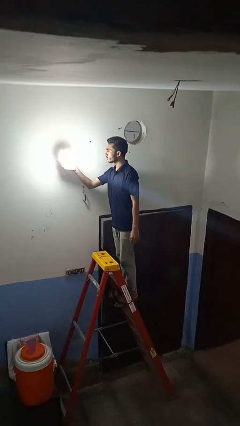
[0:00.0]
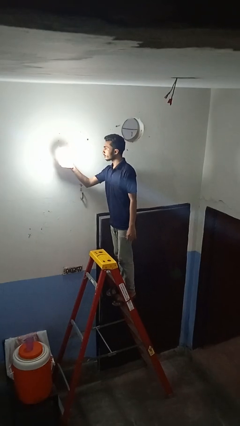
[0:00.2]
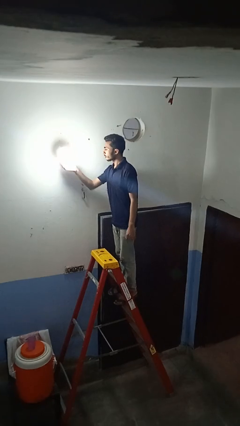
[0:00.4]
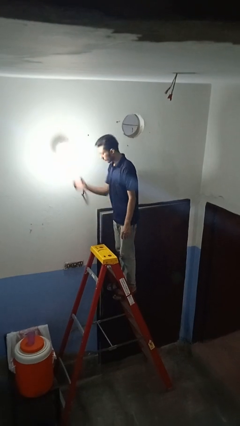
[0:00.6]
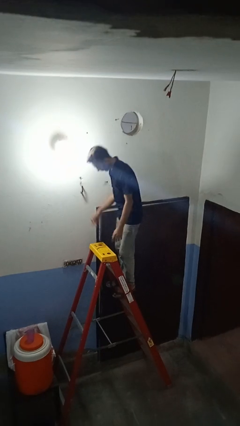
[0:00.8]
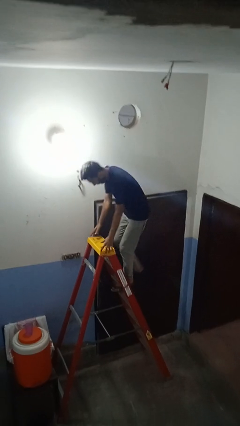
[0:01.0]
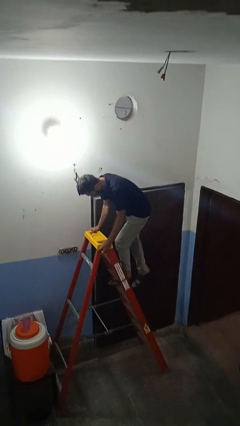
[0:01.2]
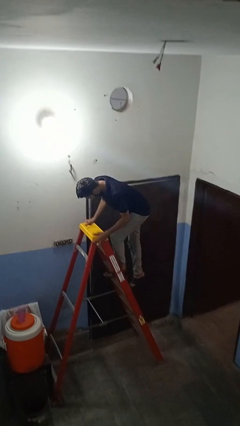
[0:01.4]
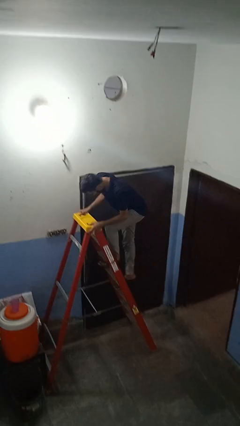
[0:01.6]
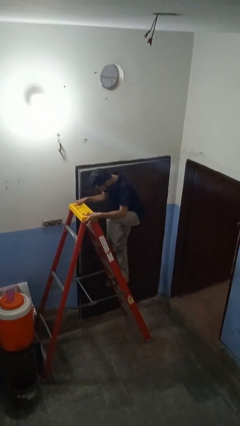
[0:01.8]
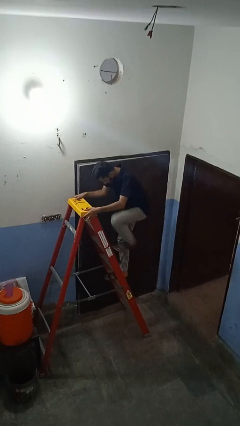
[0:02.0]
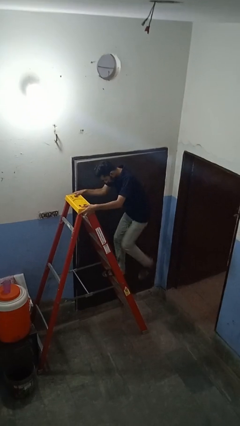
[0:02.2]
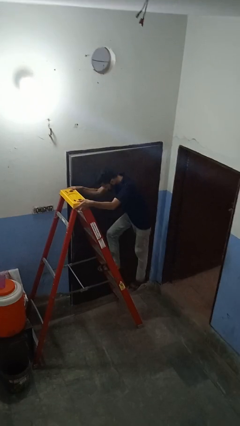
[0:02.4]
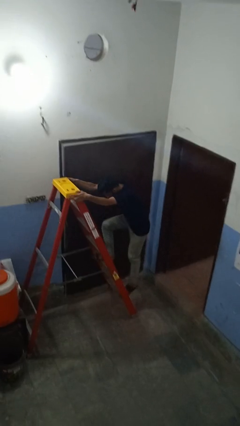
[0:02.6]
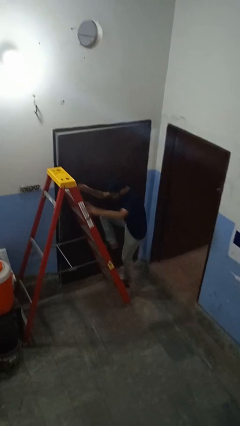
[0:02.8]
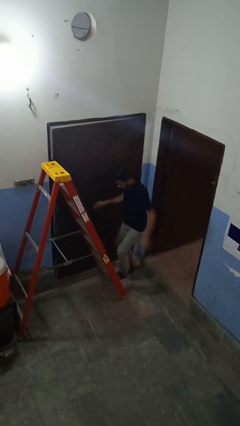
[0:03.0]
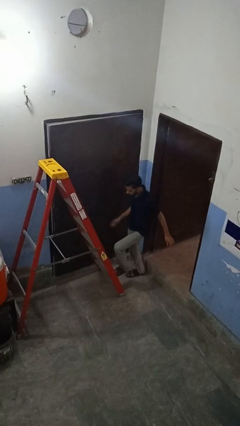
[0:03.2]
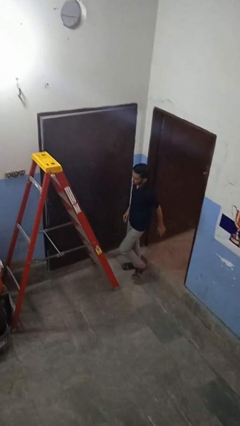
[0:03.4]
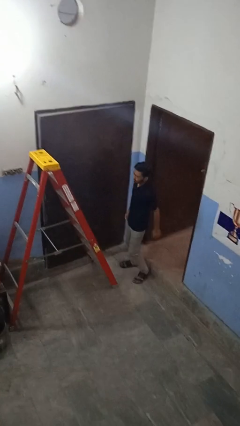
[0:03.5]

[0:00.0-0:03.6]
person climbs down ladder

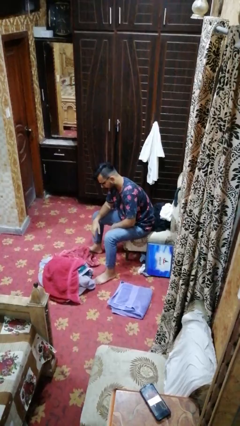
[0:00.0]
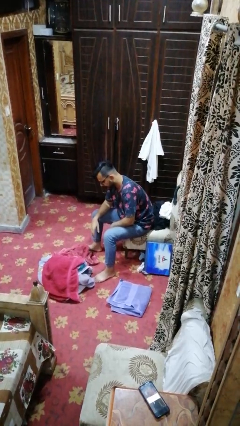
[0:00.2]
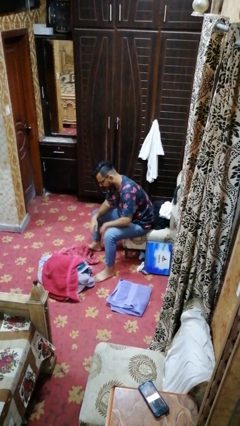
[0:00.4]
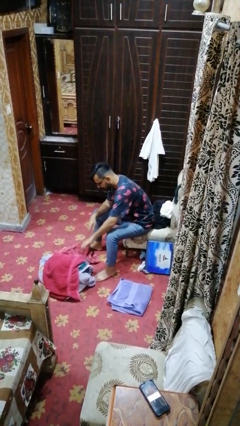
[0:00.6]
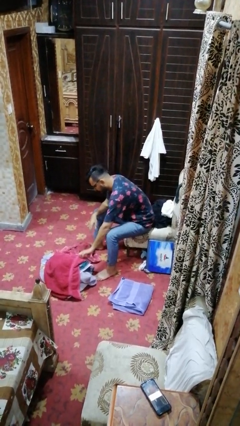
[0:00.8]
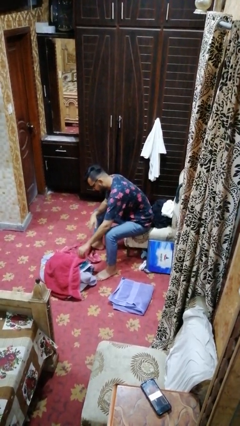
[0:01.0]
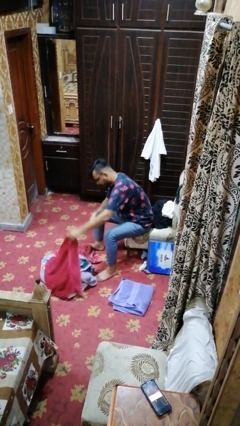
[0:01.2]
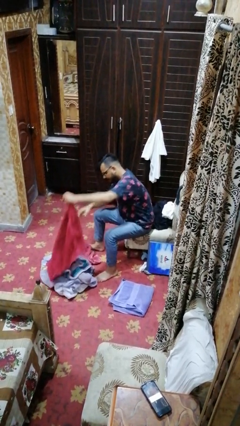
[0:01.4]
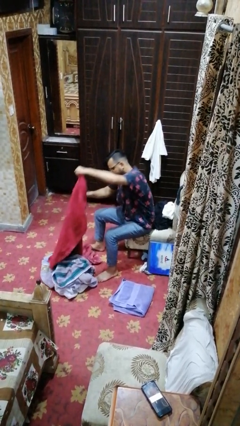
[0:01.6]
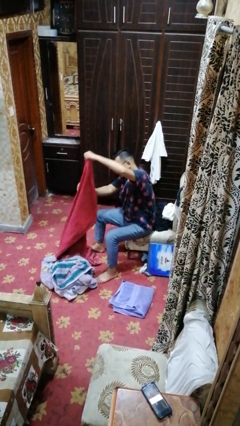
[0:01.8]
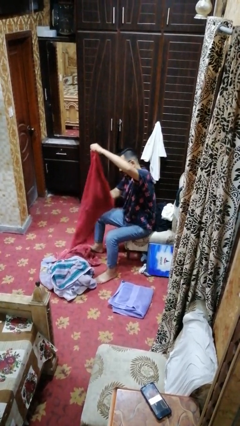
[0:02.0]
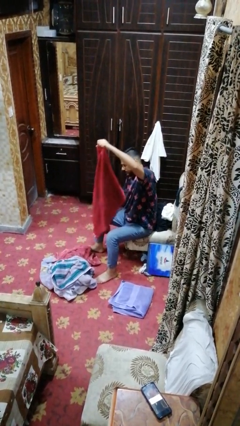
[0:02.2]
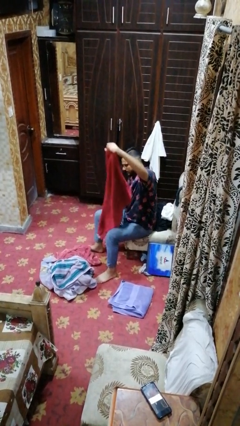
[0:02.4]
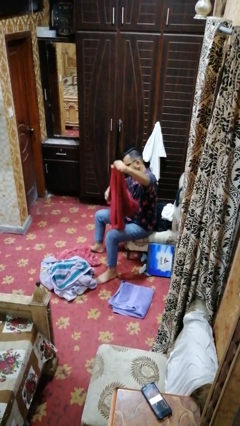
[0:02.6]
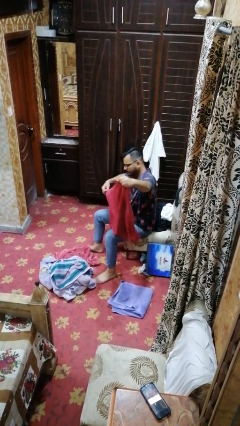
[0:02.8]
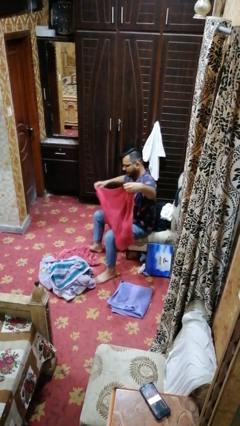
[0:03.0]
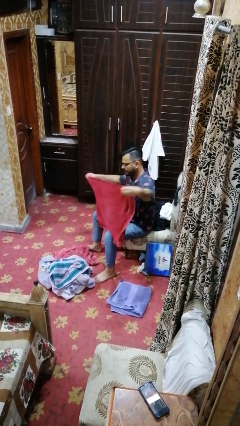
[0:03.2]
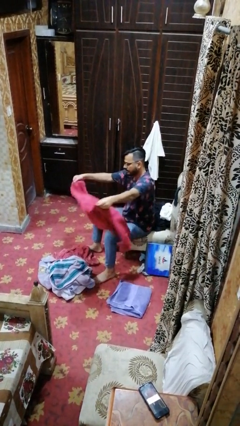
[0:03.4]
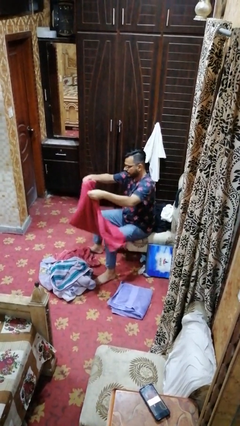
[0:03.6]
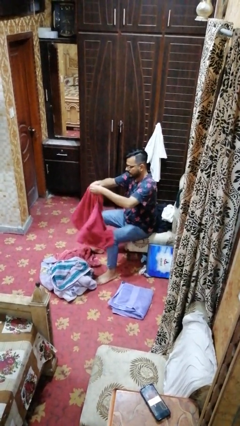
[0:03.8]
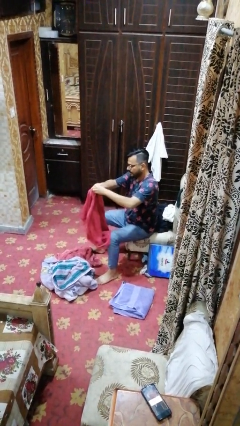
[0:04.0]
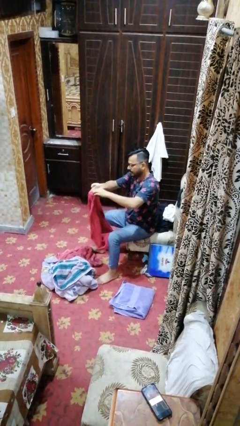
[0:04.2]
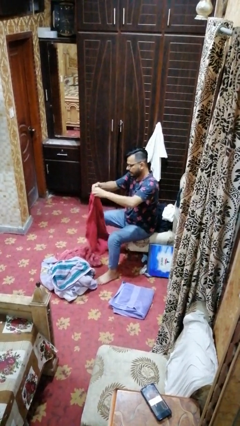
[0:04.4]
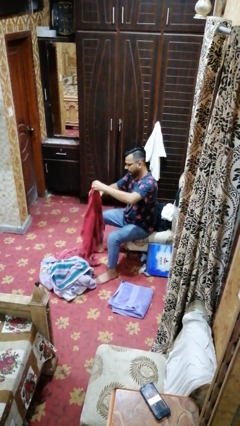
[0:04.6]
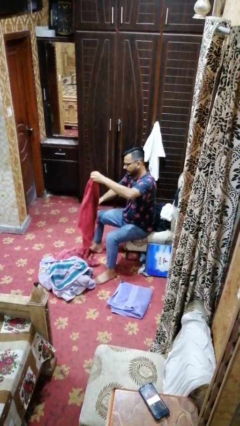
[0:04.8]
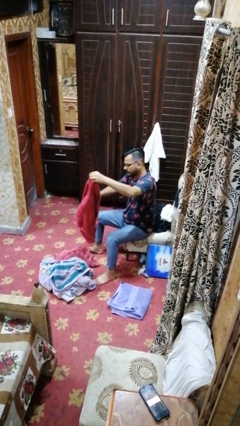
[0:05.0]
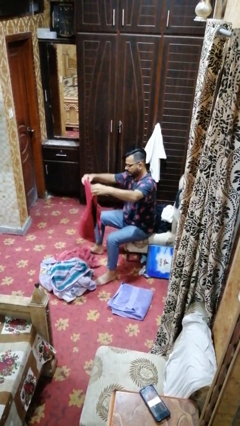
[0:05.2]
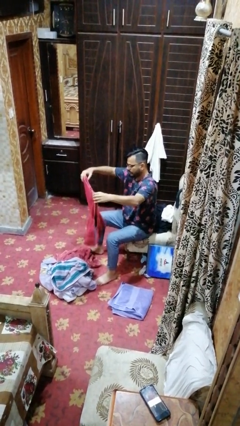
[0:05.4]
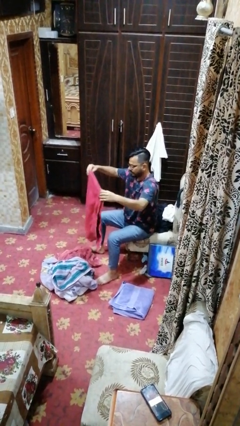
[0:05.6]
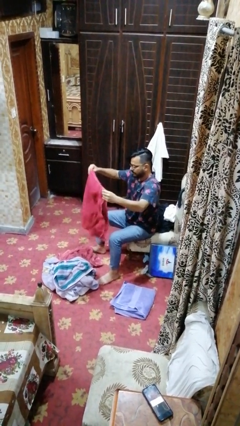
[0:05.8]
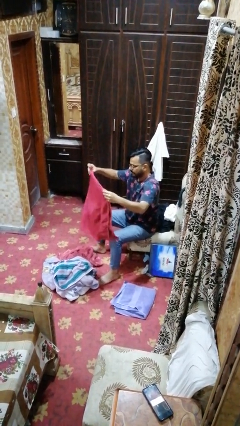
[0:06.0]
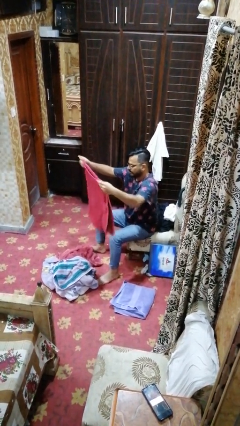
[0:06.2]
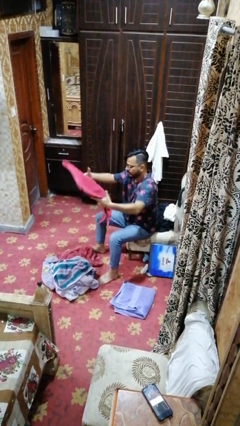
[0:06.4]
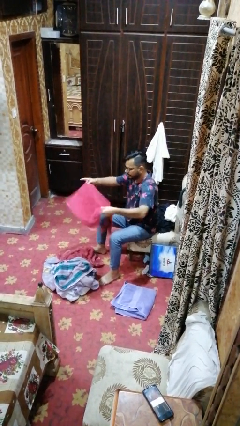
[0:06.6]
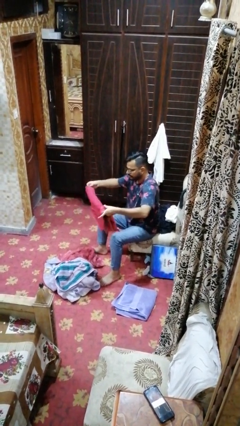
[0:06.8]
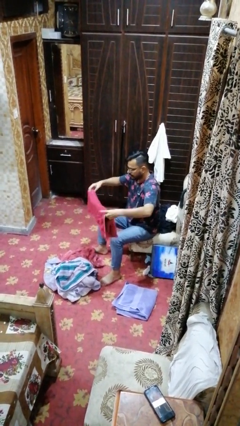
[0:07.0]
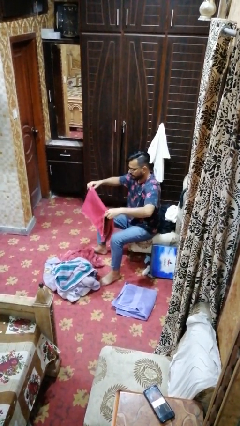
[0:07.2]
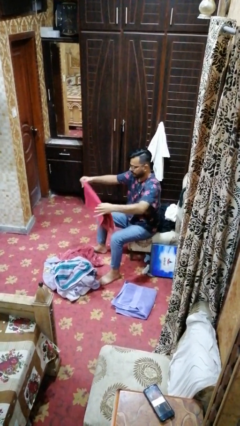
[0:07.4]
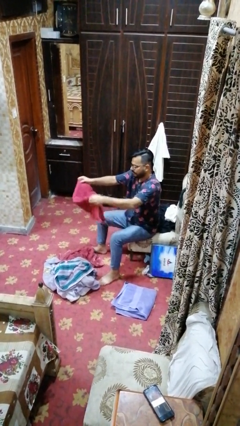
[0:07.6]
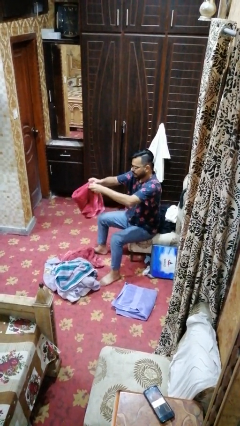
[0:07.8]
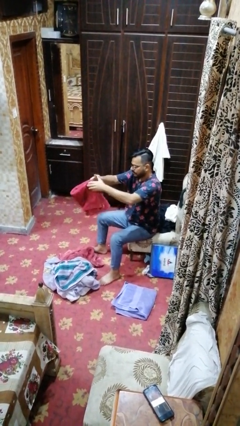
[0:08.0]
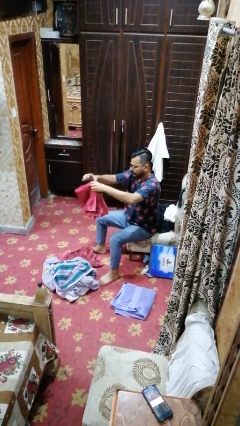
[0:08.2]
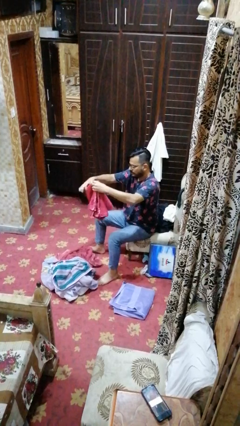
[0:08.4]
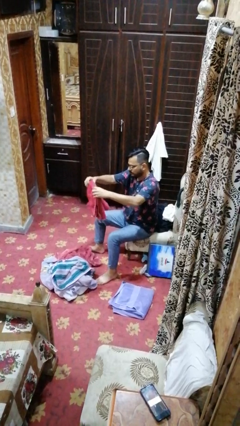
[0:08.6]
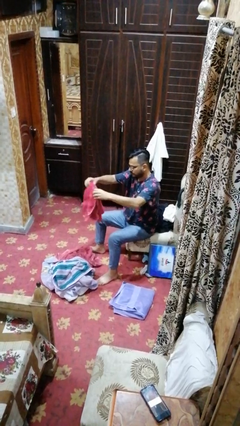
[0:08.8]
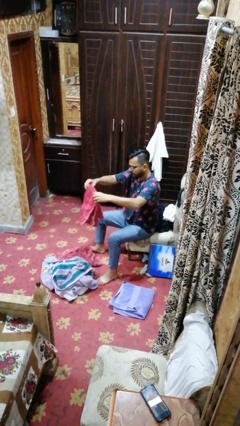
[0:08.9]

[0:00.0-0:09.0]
person folds towel

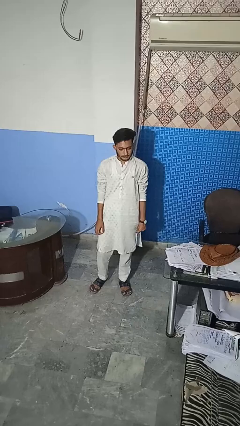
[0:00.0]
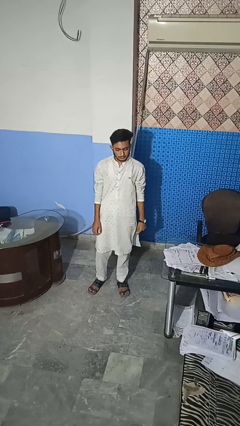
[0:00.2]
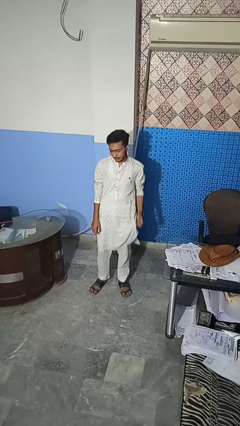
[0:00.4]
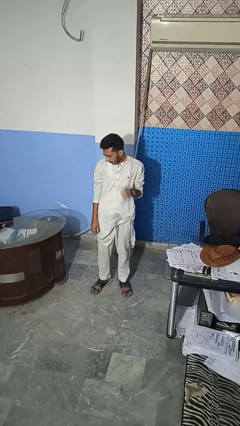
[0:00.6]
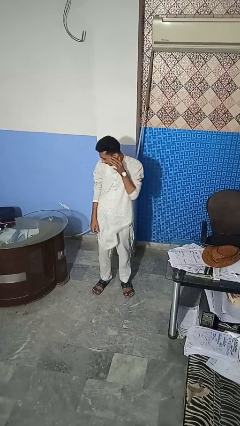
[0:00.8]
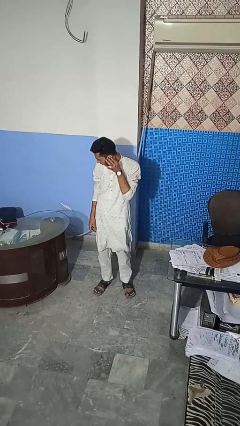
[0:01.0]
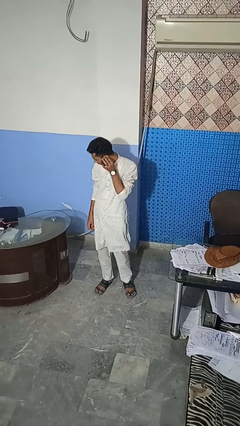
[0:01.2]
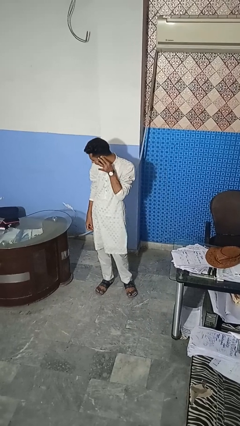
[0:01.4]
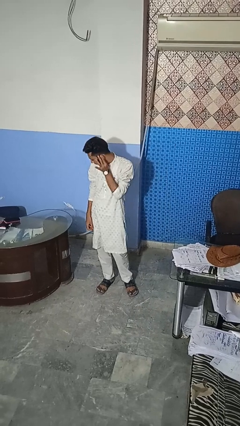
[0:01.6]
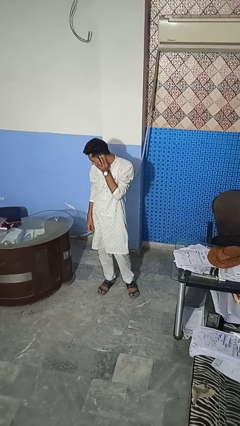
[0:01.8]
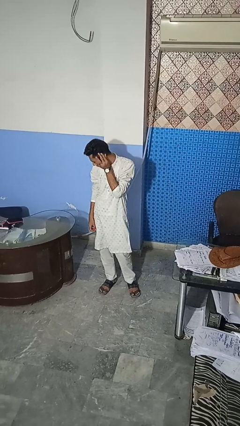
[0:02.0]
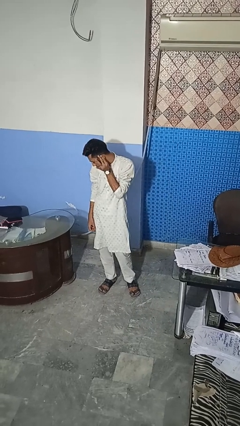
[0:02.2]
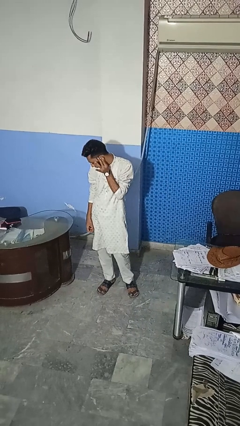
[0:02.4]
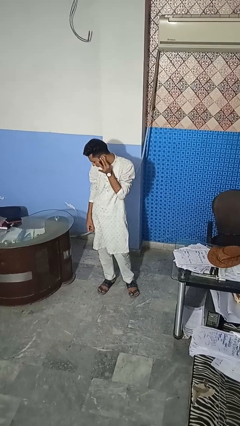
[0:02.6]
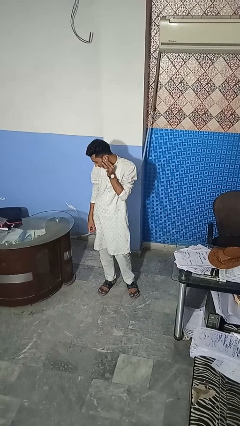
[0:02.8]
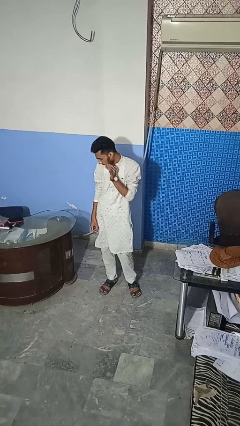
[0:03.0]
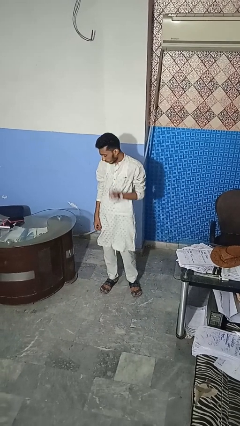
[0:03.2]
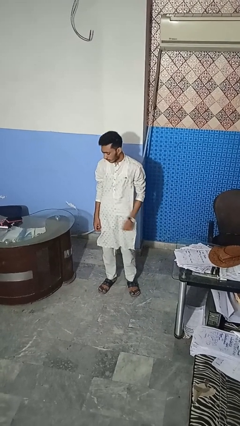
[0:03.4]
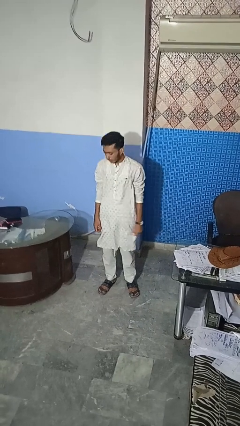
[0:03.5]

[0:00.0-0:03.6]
person touches earlobe

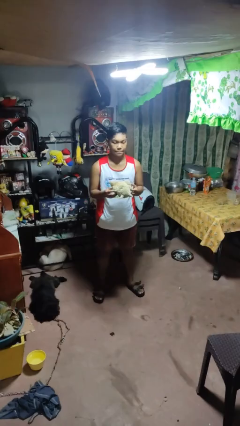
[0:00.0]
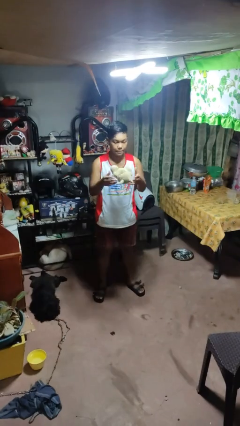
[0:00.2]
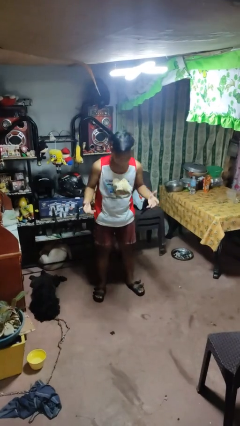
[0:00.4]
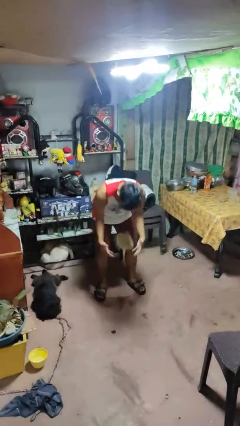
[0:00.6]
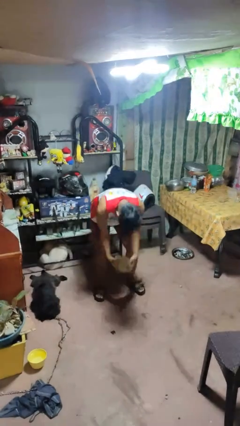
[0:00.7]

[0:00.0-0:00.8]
person drops object

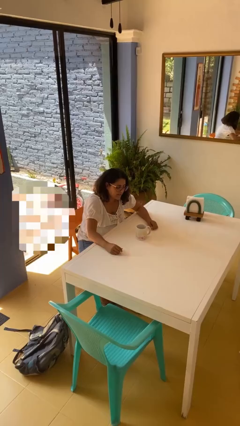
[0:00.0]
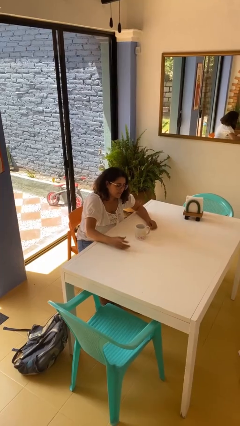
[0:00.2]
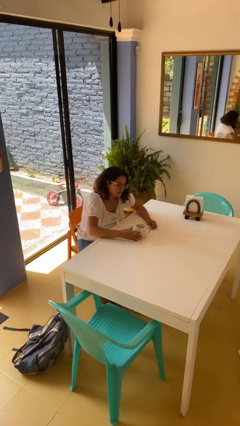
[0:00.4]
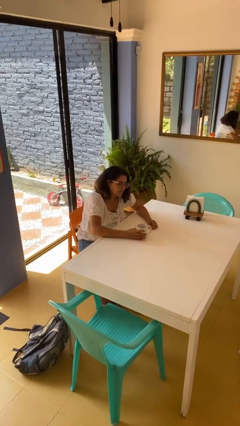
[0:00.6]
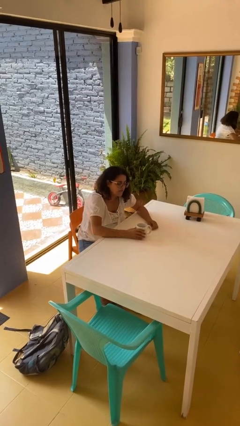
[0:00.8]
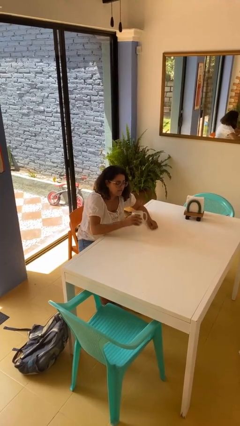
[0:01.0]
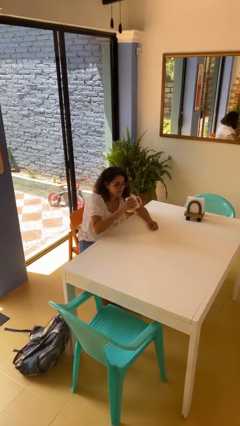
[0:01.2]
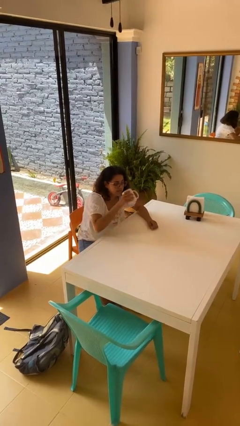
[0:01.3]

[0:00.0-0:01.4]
person picks up object from table
